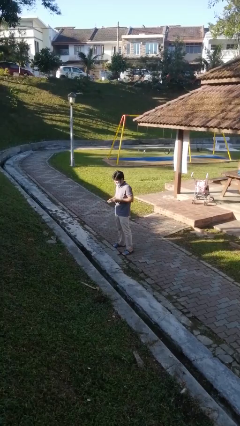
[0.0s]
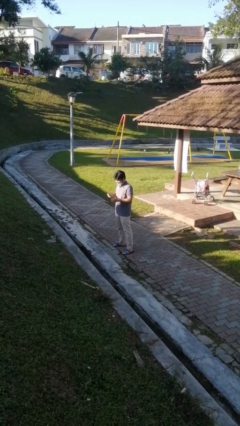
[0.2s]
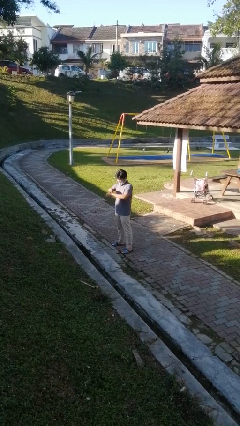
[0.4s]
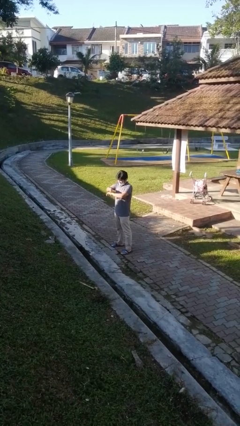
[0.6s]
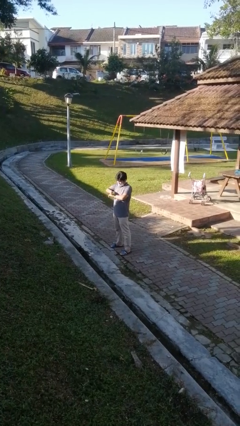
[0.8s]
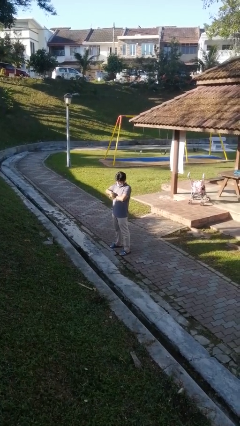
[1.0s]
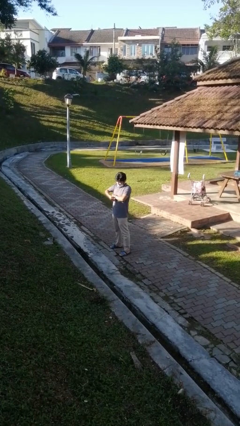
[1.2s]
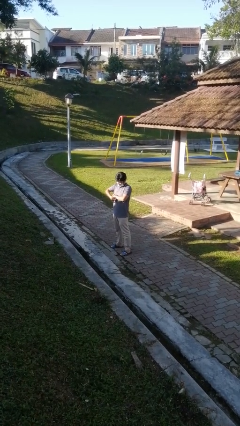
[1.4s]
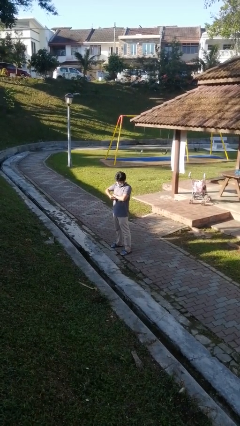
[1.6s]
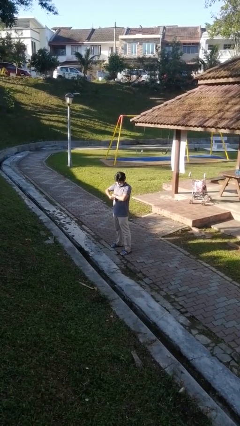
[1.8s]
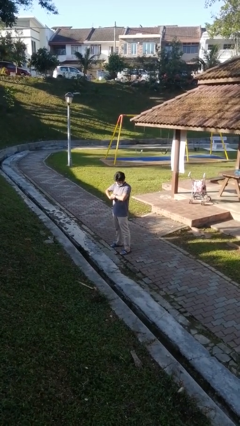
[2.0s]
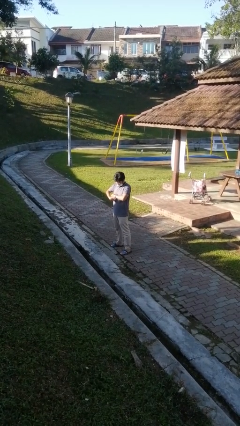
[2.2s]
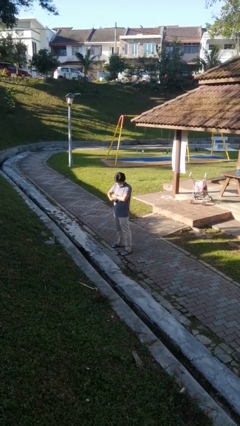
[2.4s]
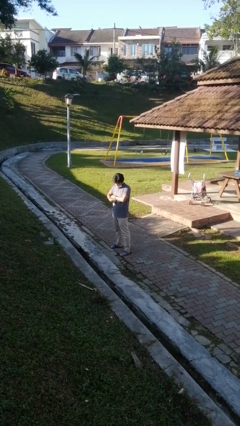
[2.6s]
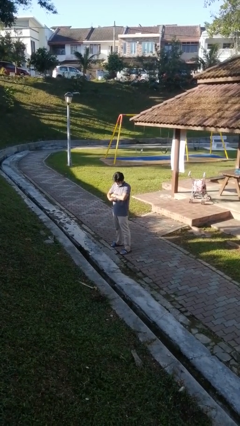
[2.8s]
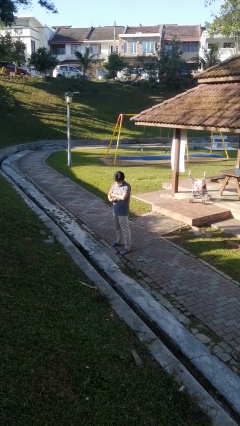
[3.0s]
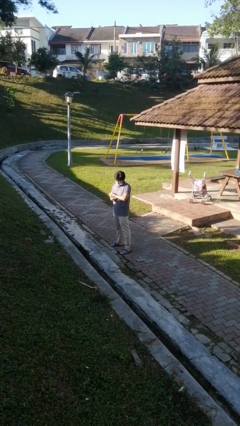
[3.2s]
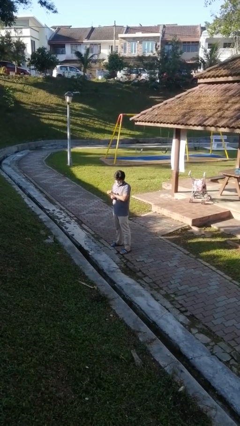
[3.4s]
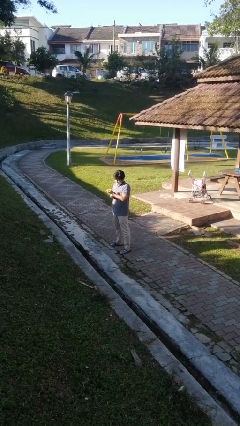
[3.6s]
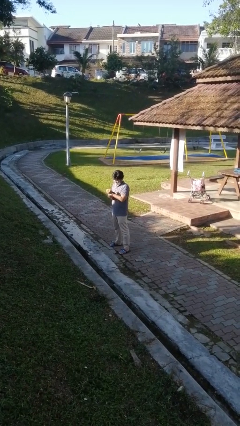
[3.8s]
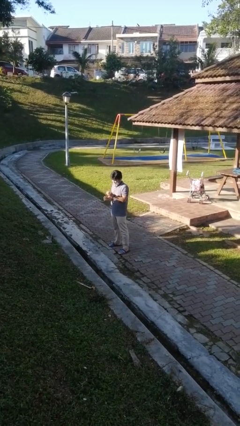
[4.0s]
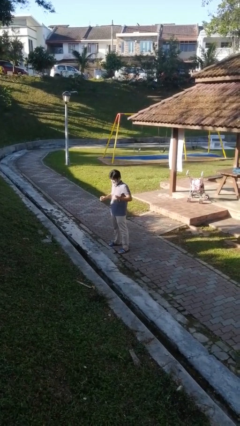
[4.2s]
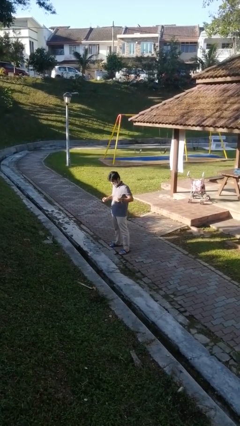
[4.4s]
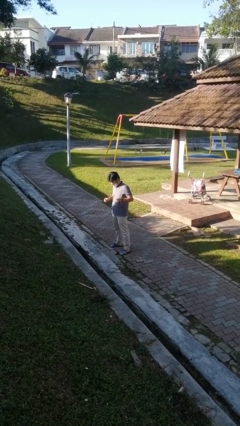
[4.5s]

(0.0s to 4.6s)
person puts on wristwatch

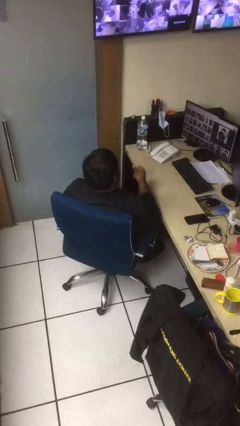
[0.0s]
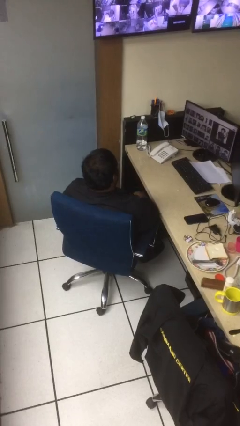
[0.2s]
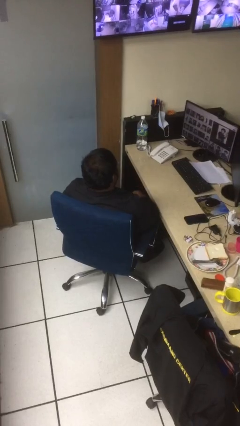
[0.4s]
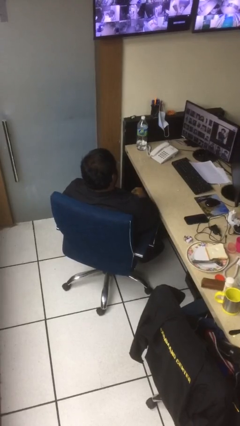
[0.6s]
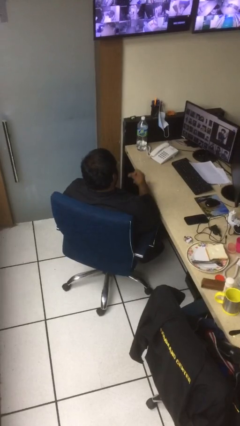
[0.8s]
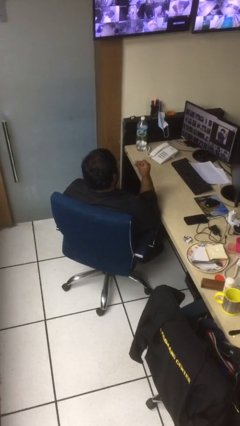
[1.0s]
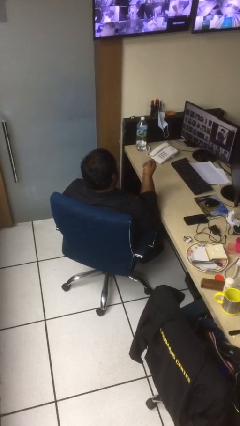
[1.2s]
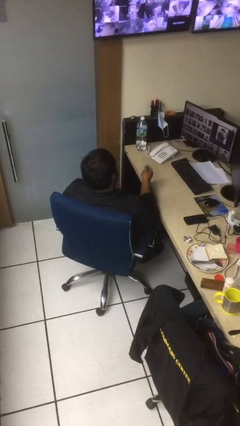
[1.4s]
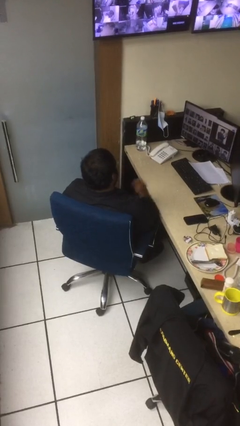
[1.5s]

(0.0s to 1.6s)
person snaps fingers

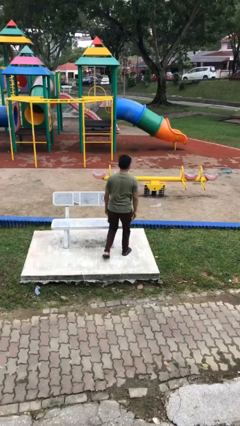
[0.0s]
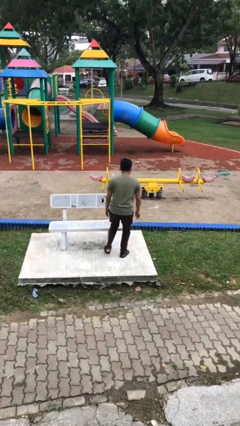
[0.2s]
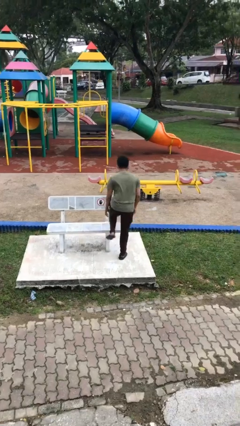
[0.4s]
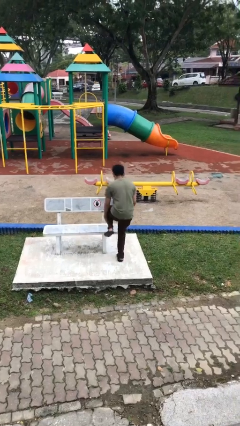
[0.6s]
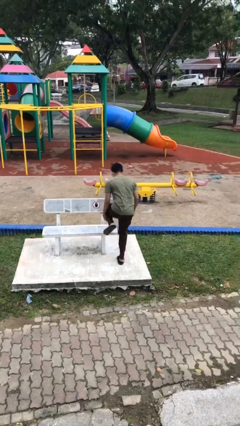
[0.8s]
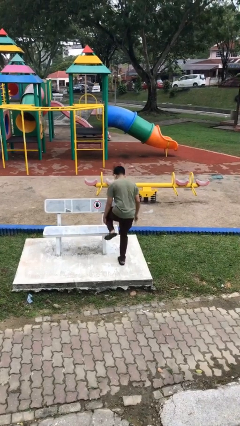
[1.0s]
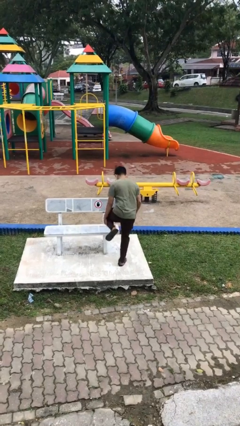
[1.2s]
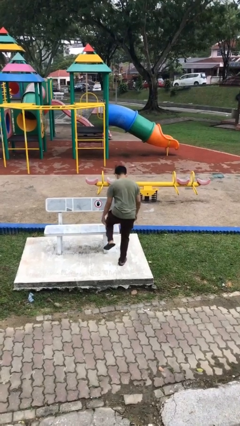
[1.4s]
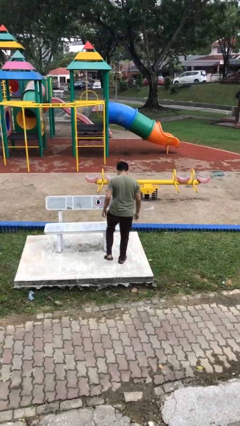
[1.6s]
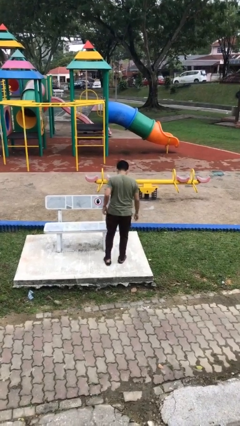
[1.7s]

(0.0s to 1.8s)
person stubs toe

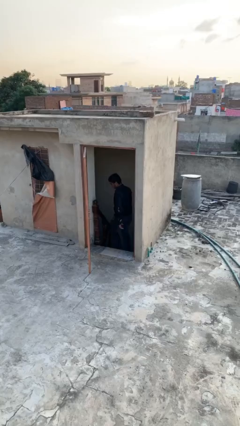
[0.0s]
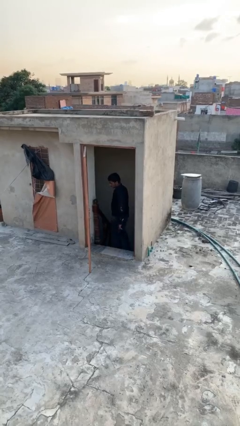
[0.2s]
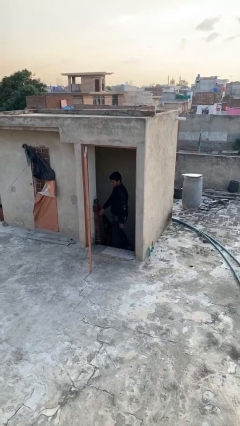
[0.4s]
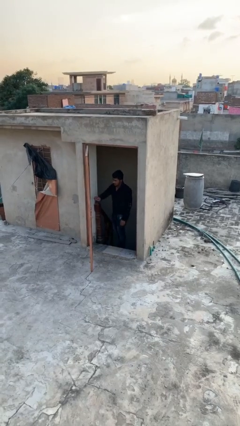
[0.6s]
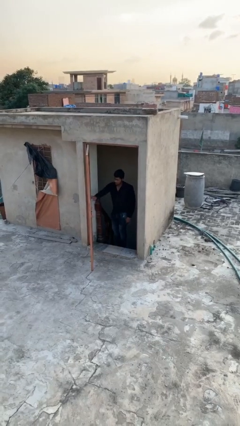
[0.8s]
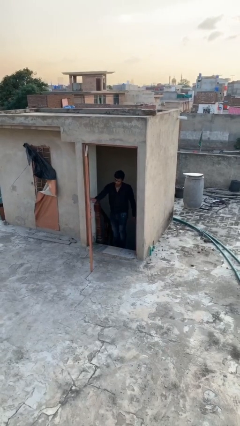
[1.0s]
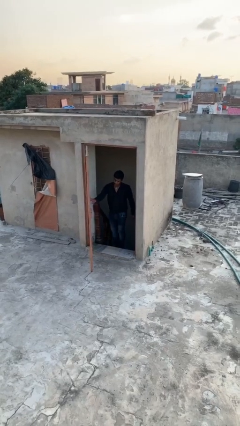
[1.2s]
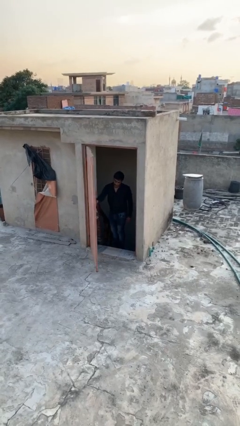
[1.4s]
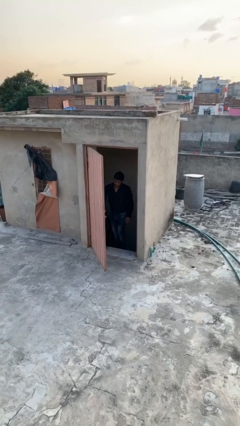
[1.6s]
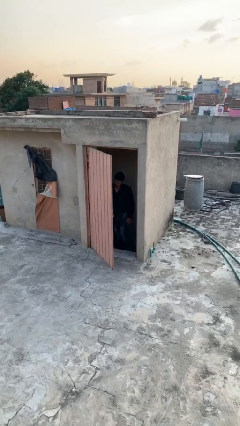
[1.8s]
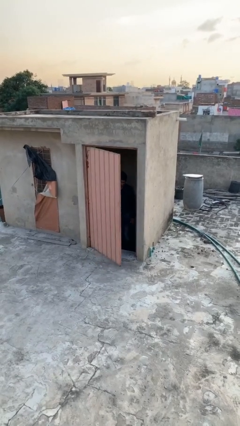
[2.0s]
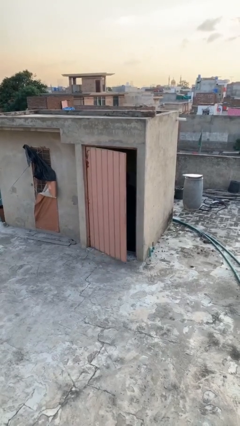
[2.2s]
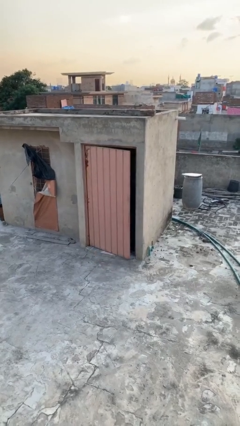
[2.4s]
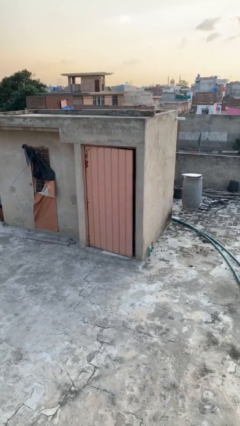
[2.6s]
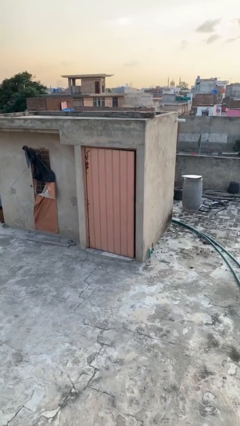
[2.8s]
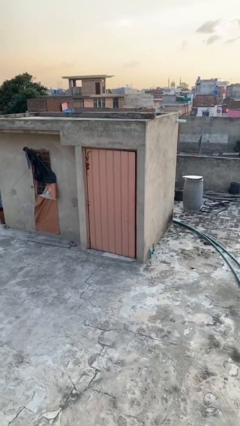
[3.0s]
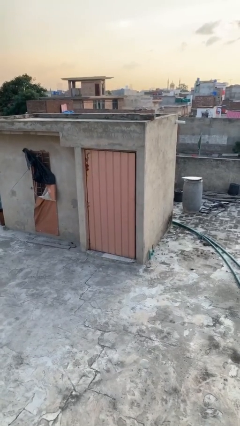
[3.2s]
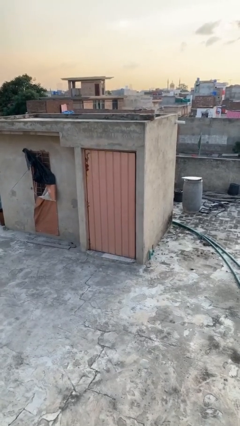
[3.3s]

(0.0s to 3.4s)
person closes facility door

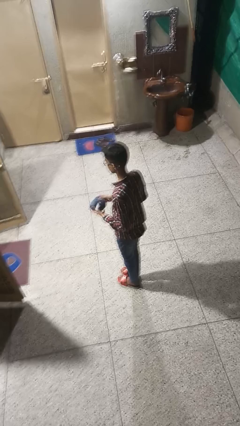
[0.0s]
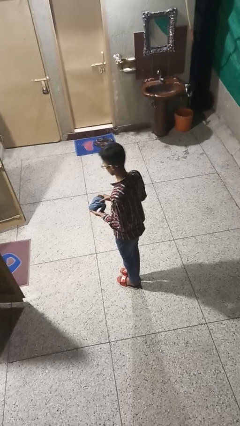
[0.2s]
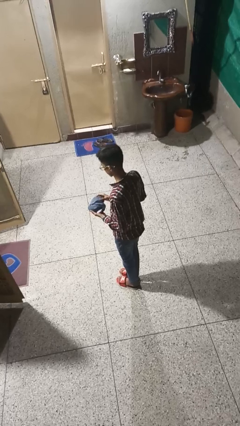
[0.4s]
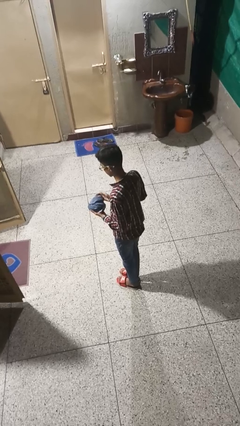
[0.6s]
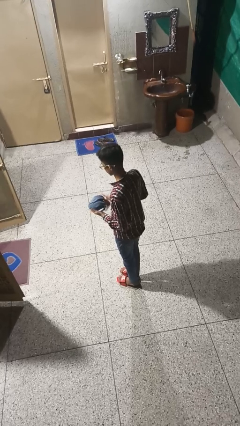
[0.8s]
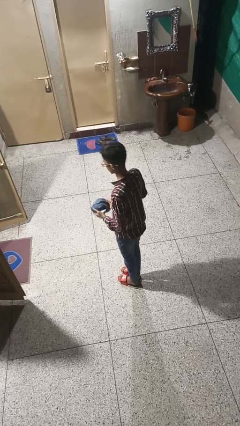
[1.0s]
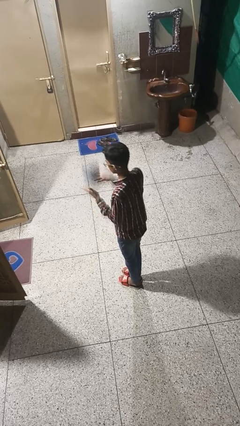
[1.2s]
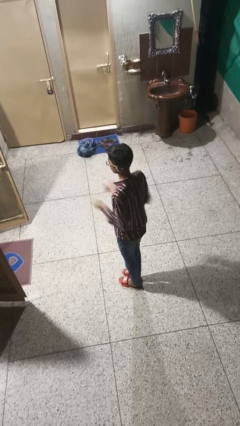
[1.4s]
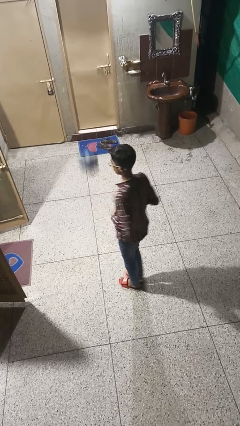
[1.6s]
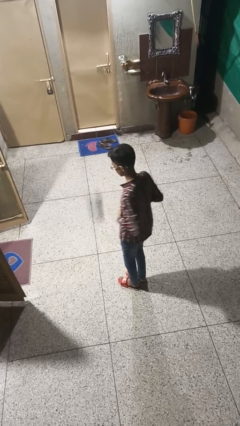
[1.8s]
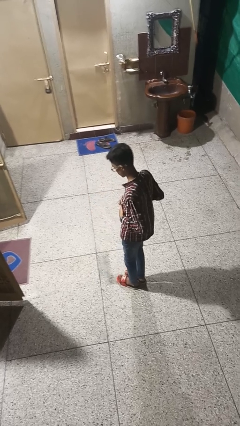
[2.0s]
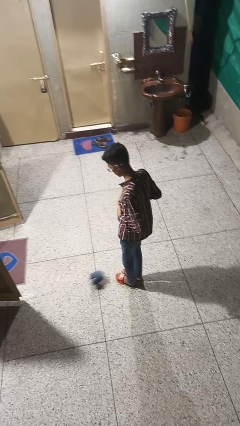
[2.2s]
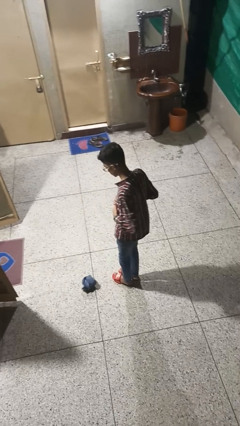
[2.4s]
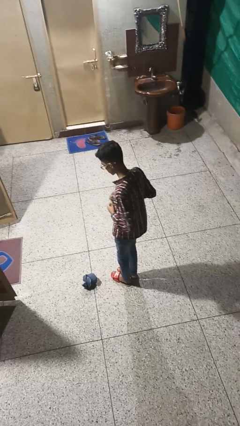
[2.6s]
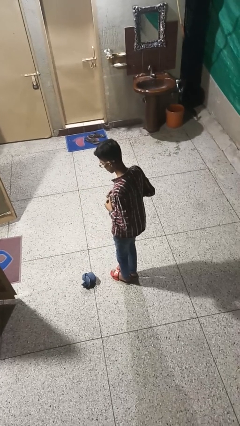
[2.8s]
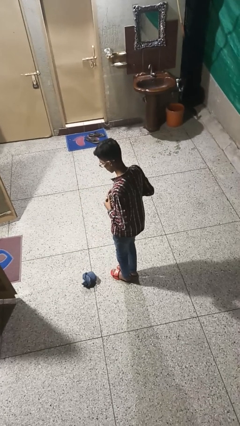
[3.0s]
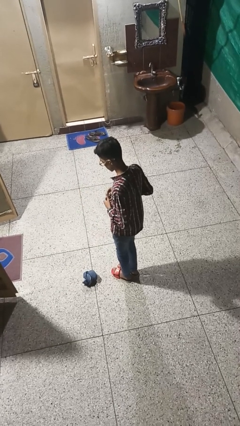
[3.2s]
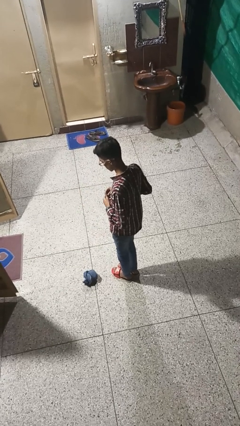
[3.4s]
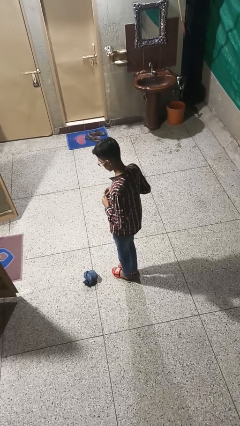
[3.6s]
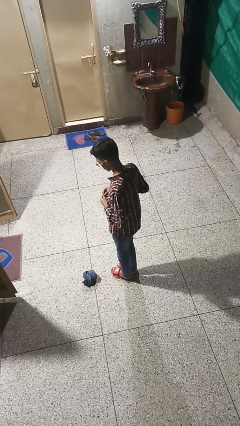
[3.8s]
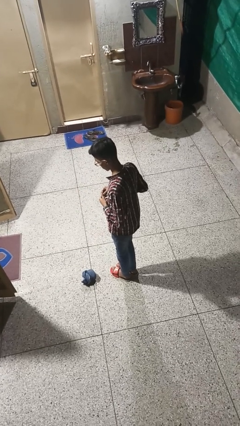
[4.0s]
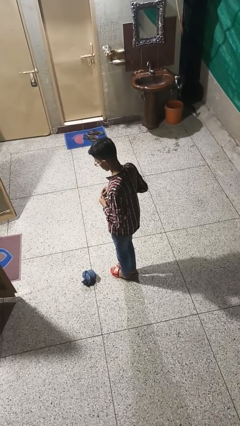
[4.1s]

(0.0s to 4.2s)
person throws object into air

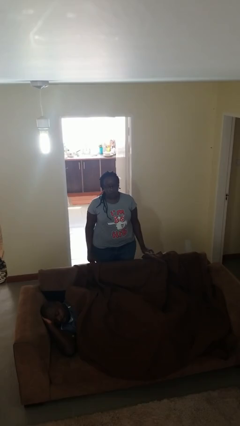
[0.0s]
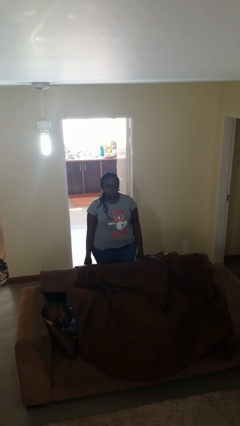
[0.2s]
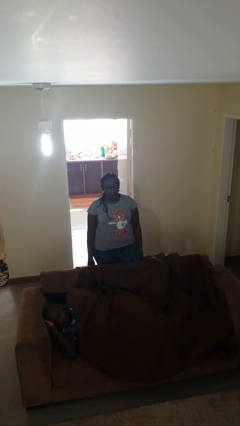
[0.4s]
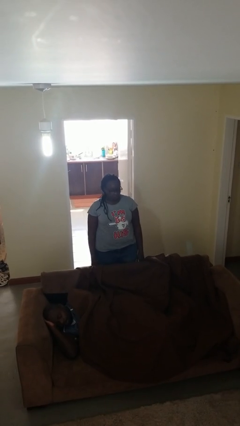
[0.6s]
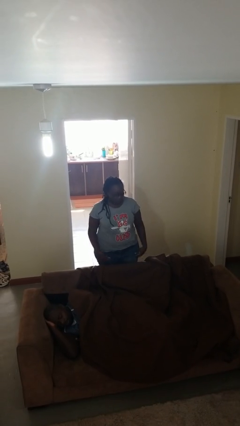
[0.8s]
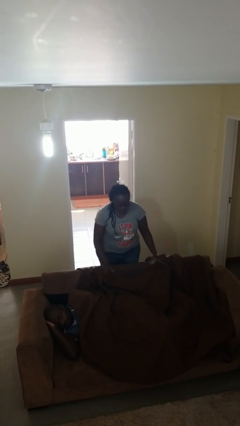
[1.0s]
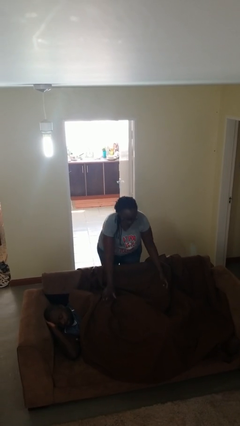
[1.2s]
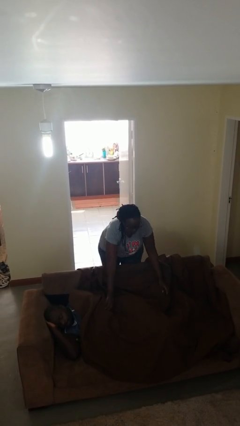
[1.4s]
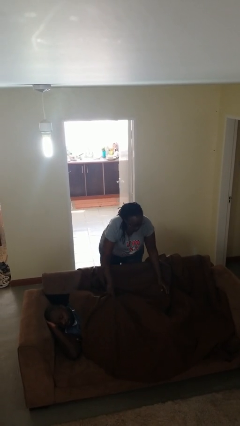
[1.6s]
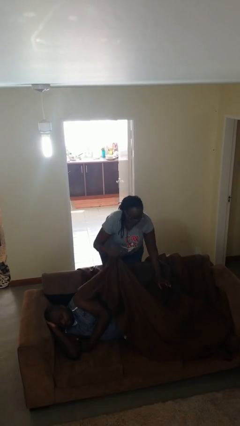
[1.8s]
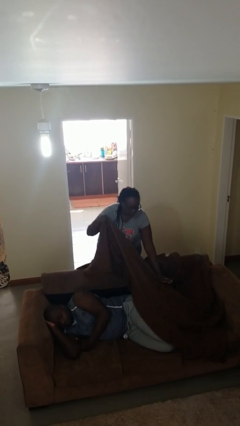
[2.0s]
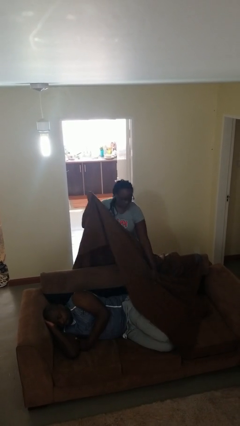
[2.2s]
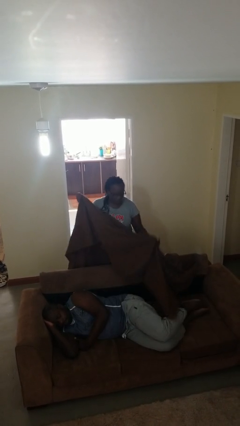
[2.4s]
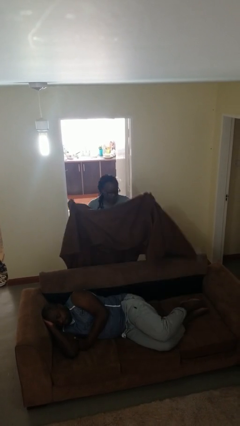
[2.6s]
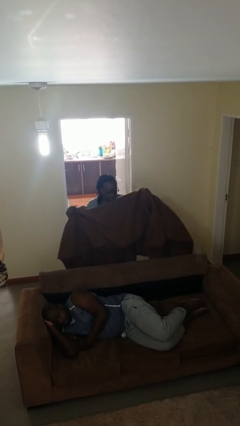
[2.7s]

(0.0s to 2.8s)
person uncovers friend with blanket
